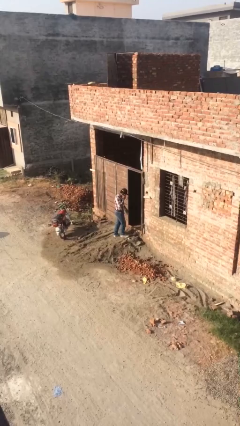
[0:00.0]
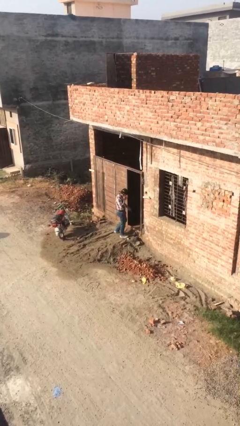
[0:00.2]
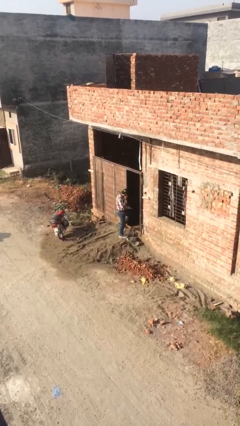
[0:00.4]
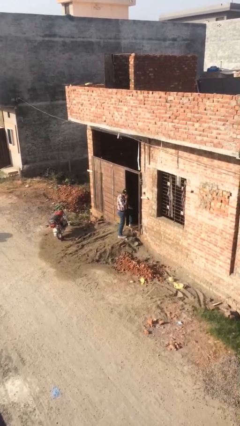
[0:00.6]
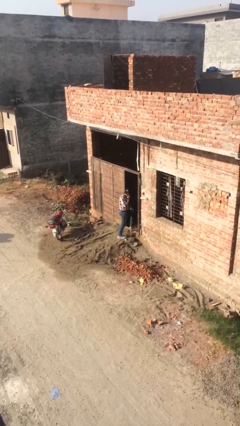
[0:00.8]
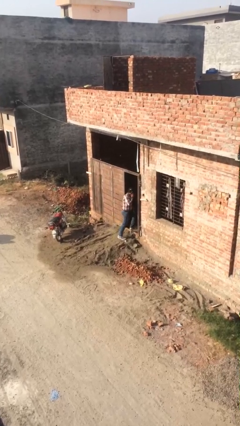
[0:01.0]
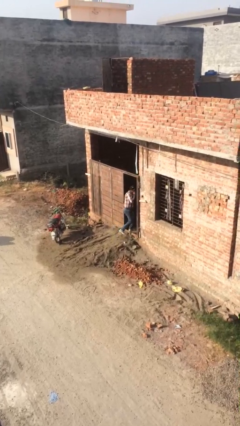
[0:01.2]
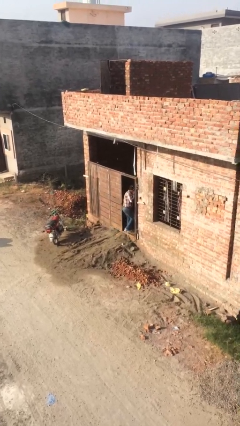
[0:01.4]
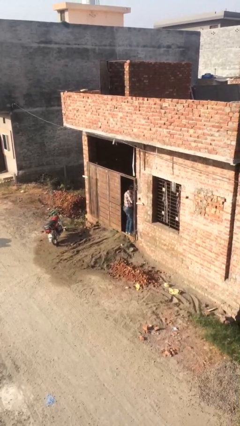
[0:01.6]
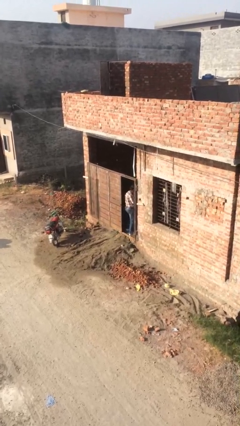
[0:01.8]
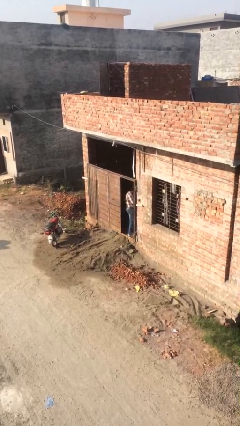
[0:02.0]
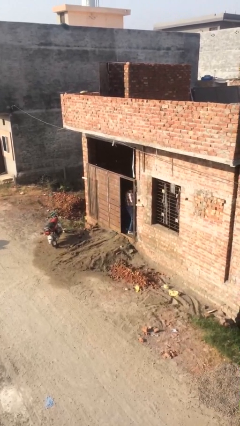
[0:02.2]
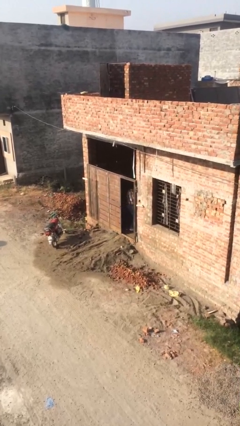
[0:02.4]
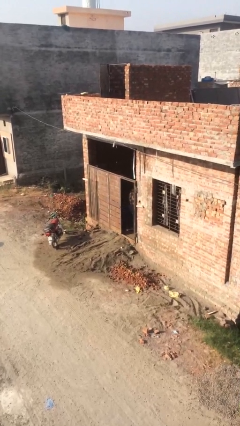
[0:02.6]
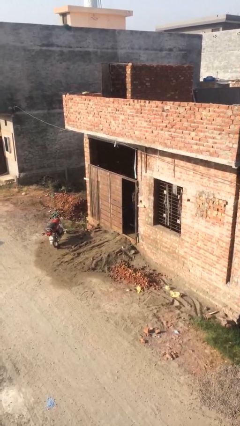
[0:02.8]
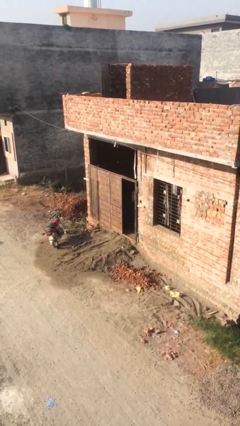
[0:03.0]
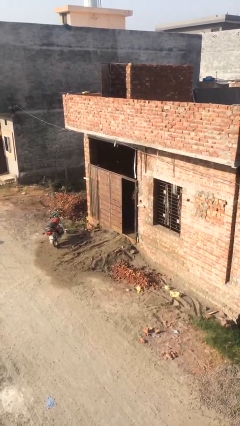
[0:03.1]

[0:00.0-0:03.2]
person exits scene through structure

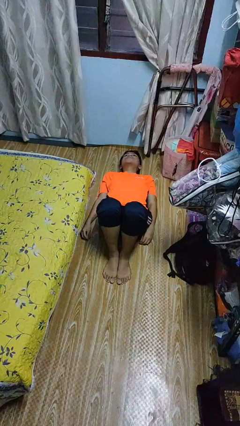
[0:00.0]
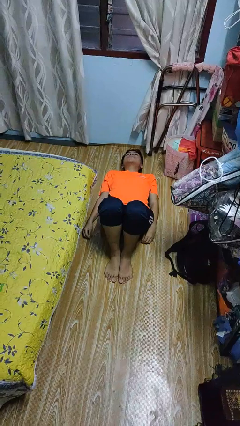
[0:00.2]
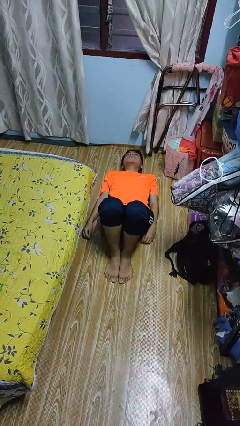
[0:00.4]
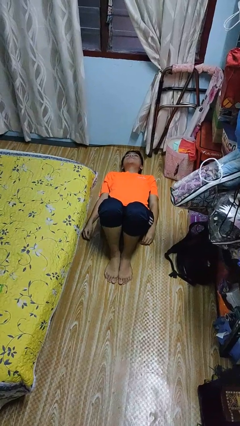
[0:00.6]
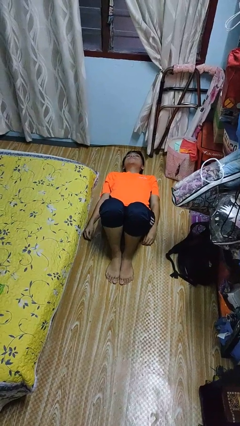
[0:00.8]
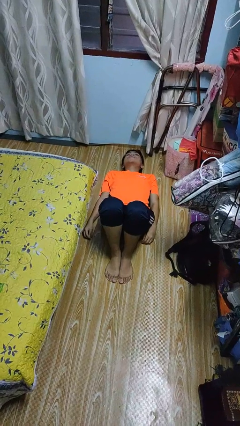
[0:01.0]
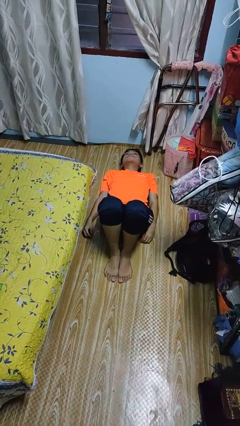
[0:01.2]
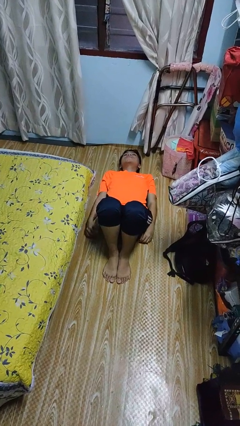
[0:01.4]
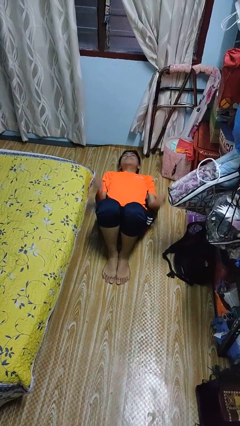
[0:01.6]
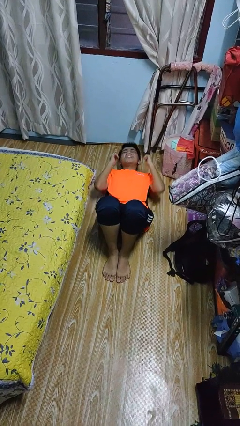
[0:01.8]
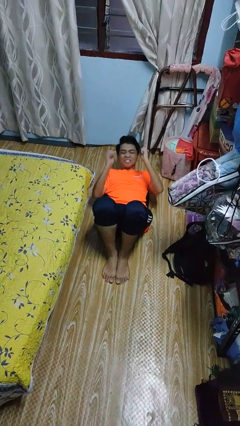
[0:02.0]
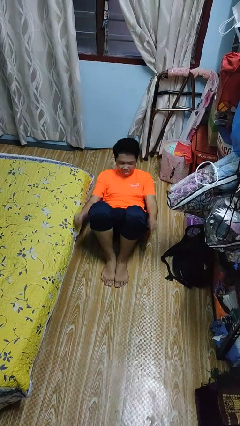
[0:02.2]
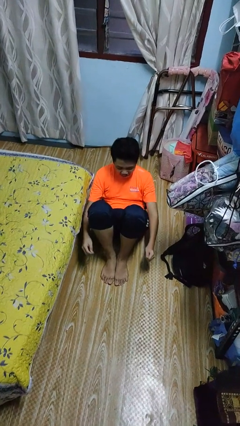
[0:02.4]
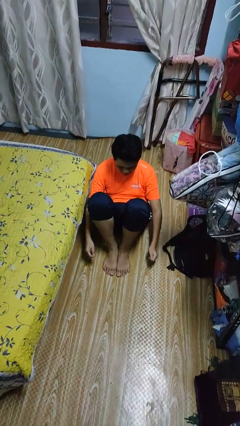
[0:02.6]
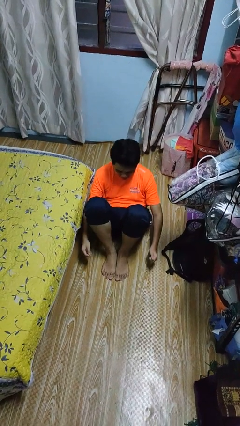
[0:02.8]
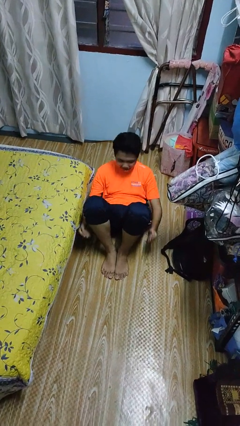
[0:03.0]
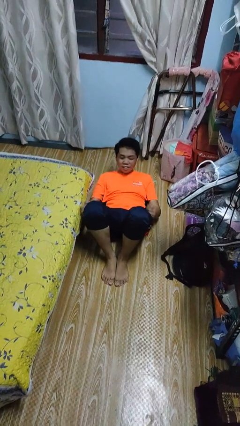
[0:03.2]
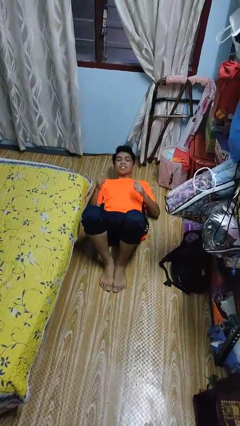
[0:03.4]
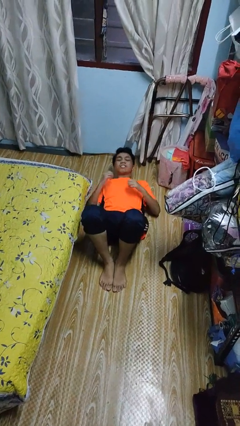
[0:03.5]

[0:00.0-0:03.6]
person exercises with situp

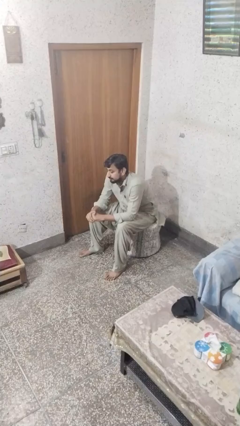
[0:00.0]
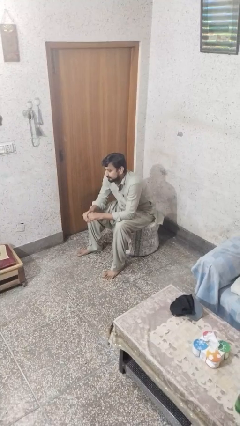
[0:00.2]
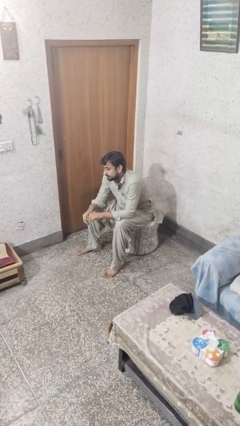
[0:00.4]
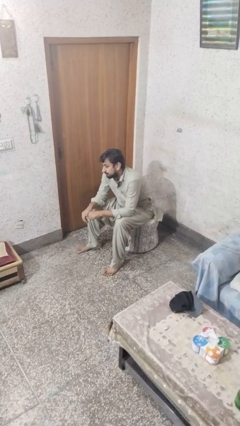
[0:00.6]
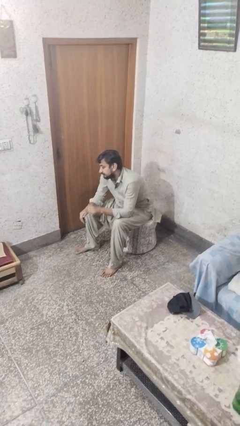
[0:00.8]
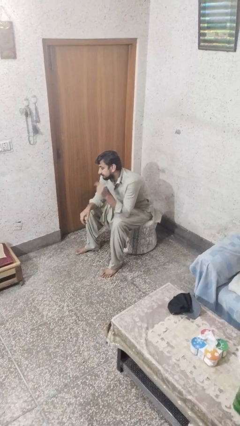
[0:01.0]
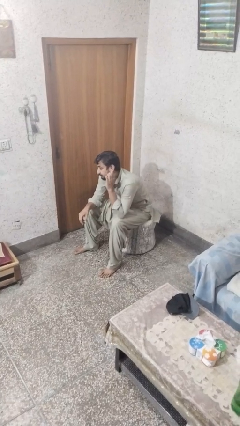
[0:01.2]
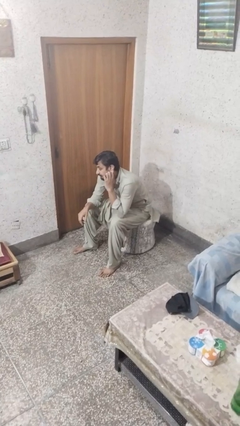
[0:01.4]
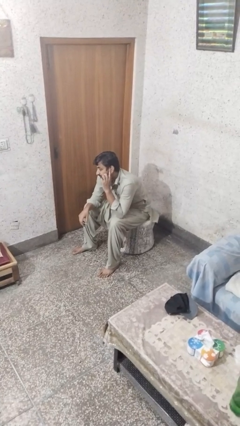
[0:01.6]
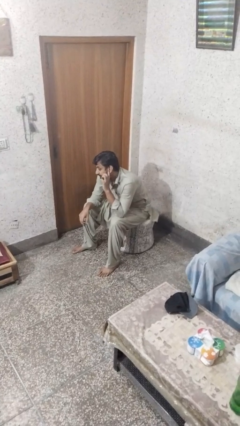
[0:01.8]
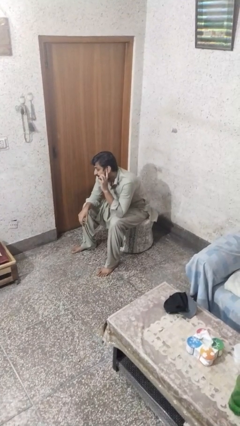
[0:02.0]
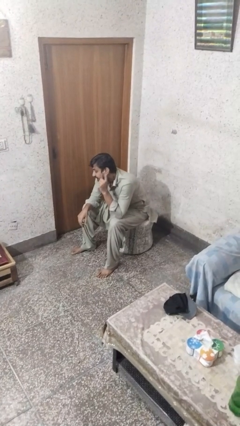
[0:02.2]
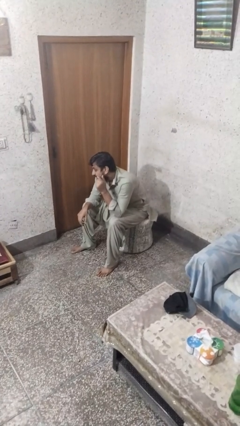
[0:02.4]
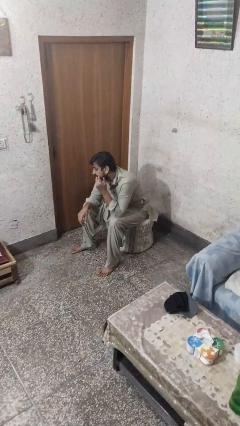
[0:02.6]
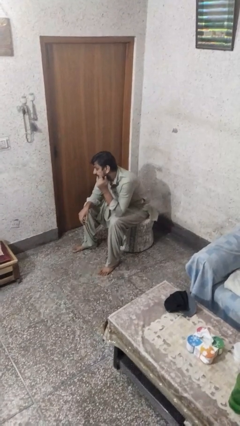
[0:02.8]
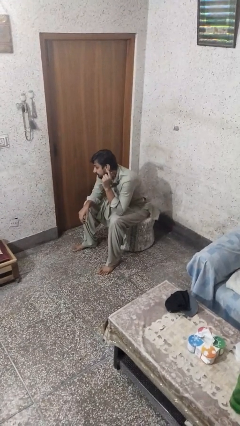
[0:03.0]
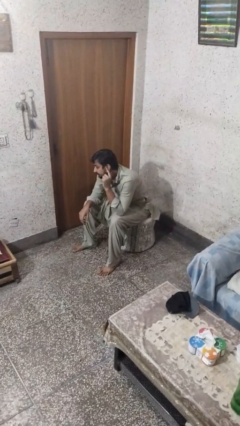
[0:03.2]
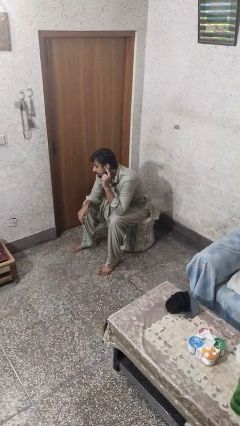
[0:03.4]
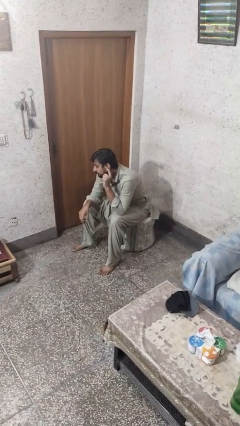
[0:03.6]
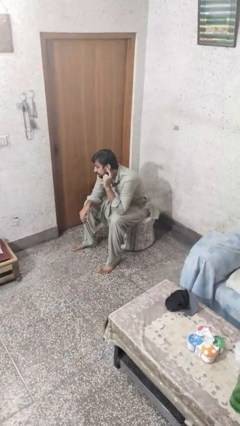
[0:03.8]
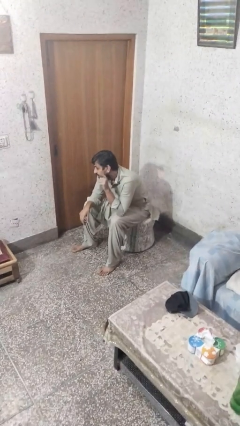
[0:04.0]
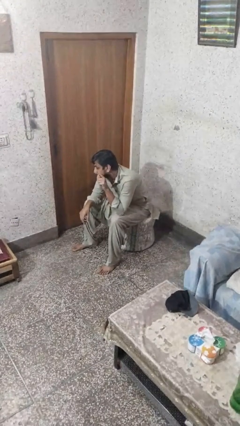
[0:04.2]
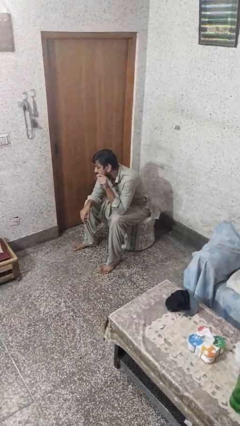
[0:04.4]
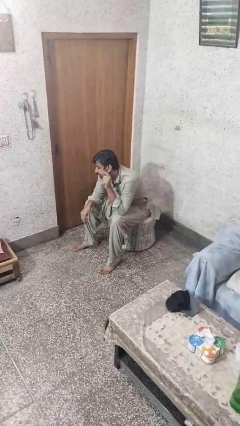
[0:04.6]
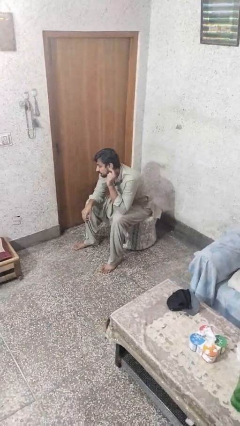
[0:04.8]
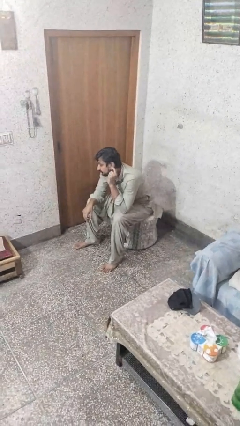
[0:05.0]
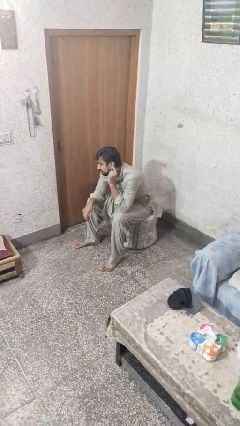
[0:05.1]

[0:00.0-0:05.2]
person gestures listen closely

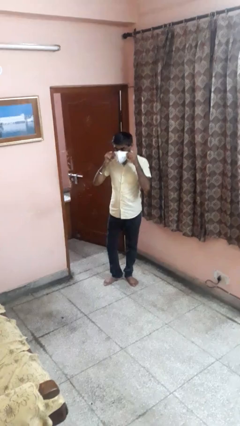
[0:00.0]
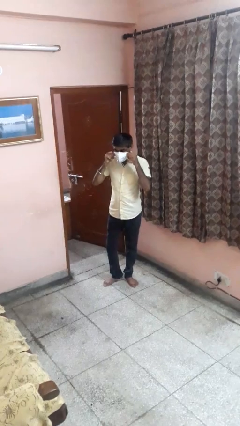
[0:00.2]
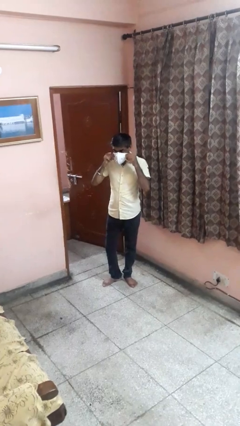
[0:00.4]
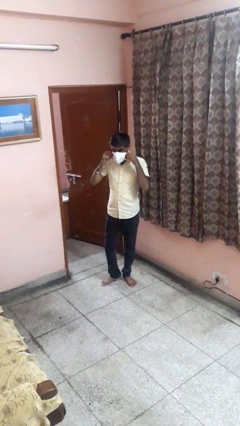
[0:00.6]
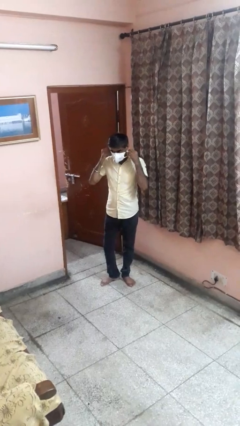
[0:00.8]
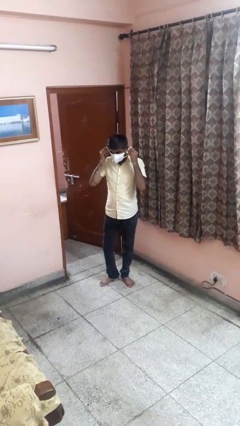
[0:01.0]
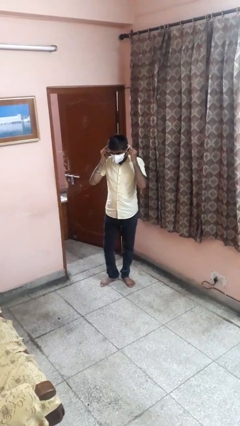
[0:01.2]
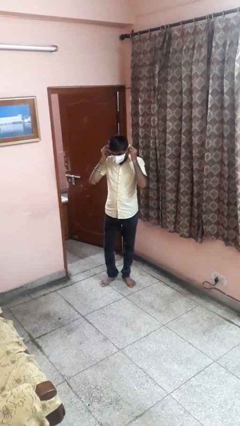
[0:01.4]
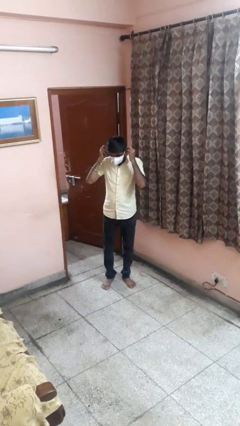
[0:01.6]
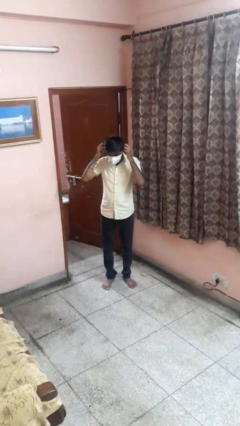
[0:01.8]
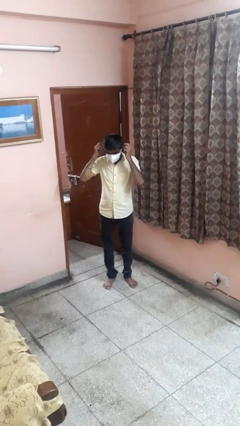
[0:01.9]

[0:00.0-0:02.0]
person puts on facemask

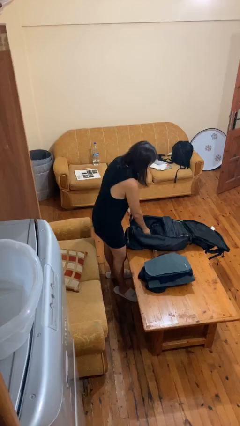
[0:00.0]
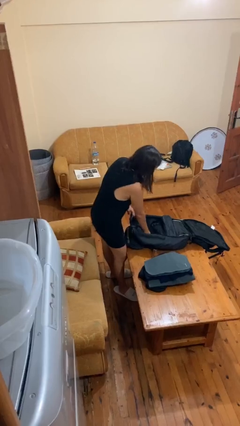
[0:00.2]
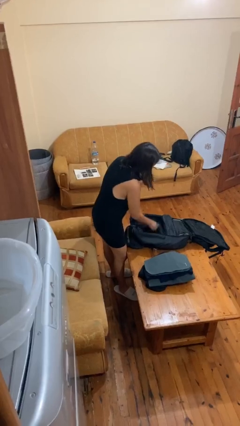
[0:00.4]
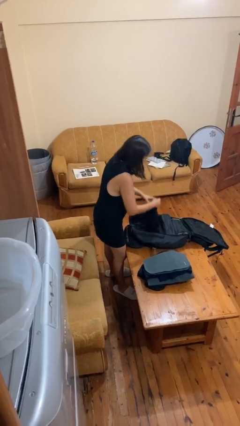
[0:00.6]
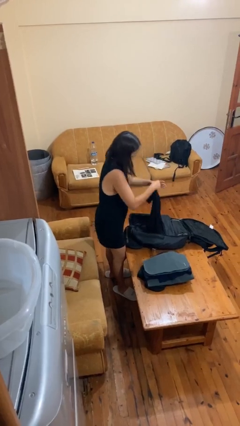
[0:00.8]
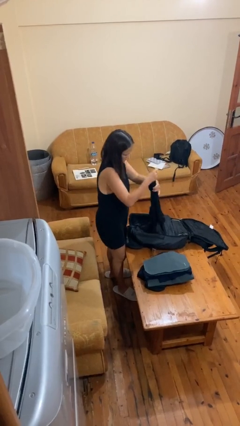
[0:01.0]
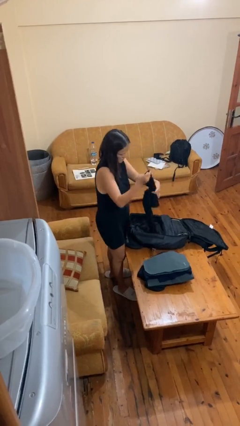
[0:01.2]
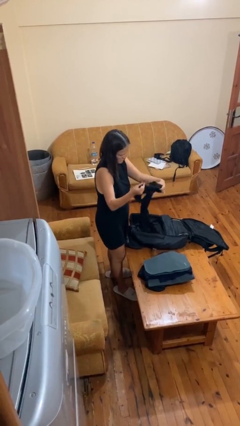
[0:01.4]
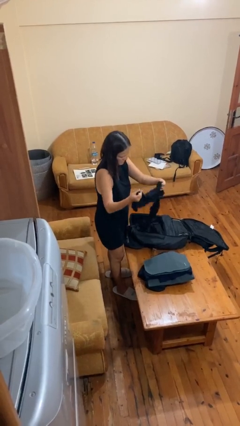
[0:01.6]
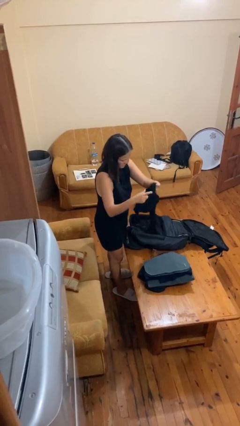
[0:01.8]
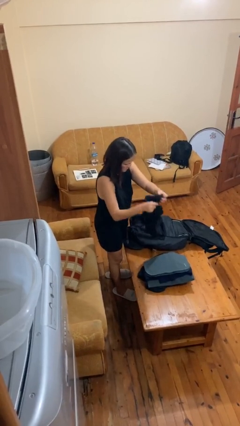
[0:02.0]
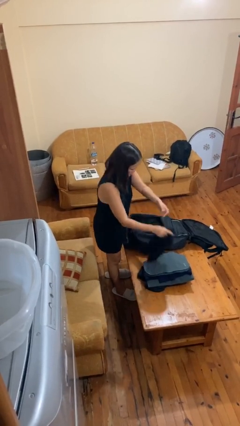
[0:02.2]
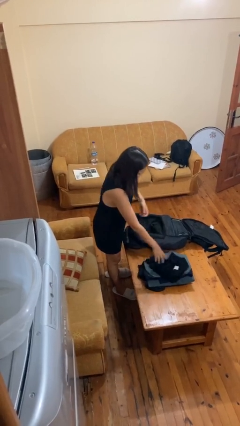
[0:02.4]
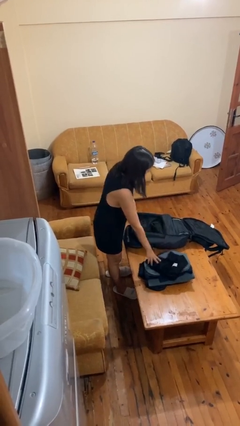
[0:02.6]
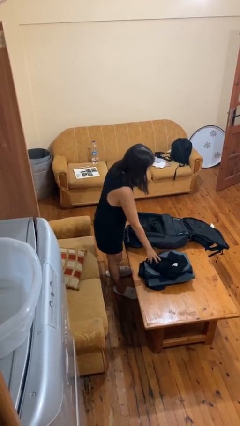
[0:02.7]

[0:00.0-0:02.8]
person unloads clothes from suitcase

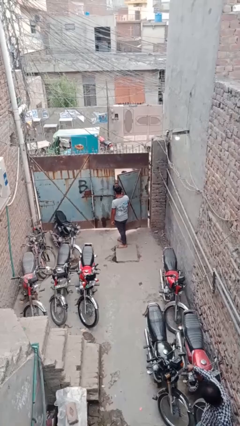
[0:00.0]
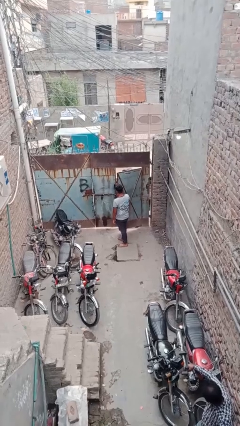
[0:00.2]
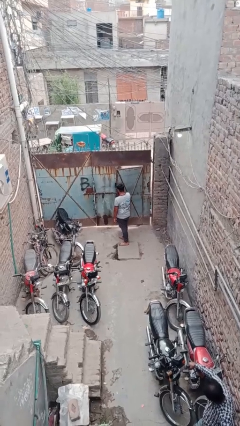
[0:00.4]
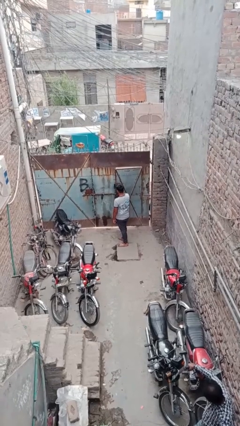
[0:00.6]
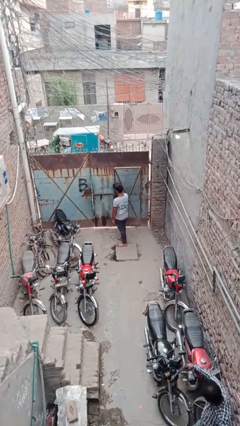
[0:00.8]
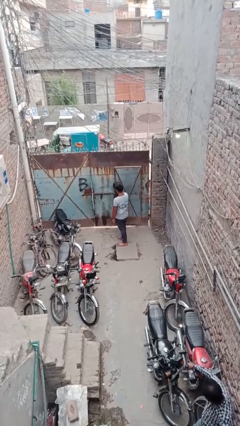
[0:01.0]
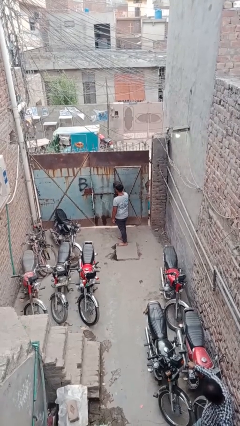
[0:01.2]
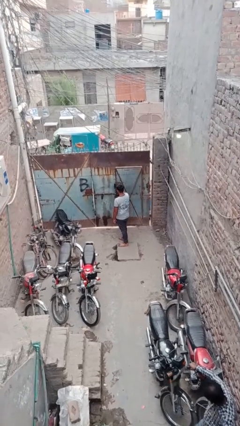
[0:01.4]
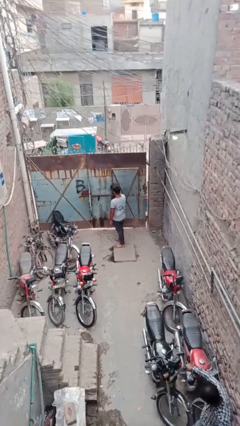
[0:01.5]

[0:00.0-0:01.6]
person closes facility door
